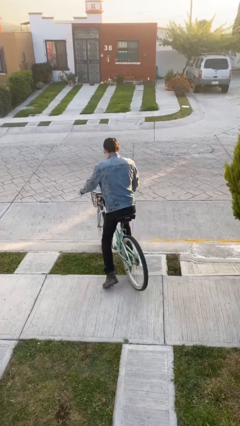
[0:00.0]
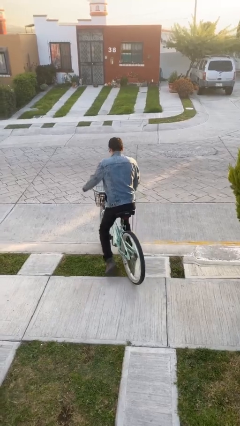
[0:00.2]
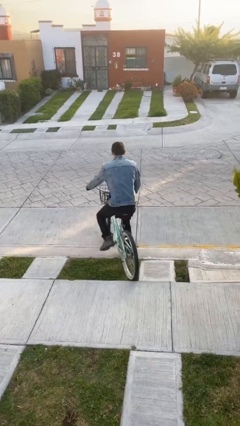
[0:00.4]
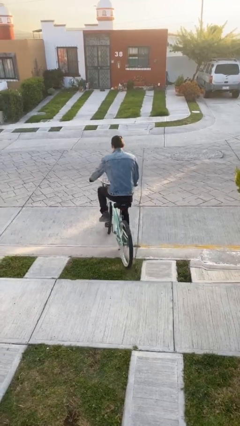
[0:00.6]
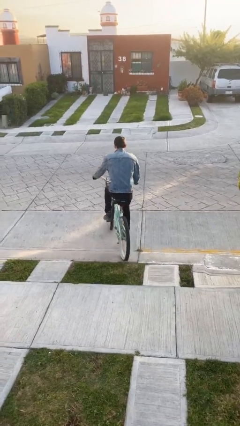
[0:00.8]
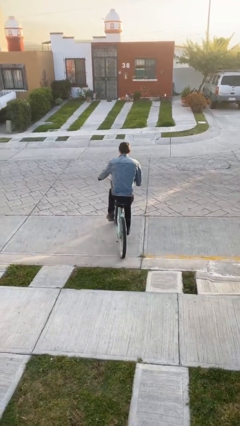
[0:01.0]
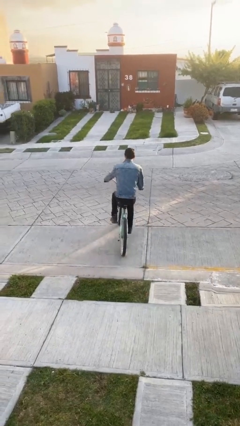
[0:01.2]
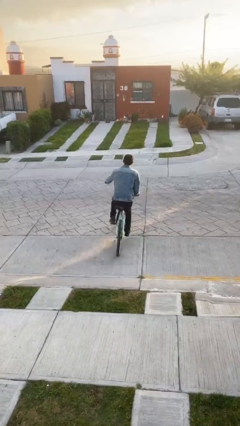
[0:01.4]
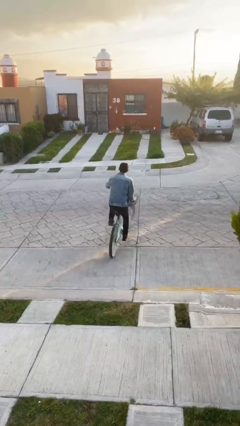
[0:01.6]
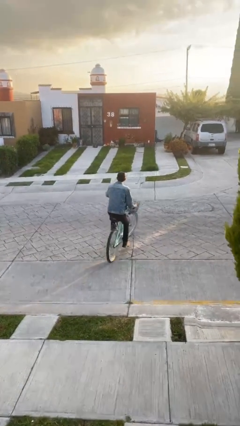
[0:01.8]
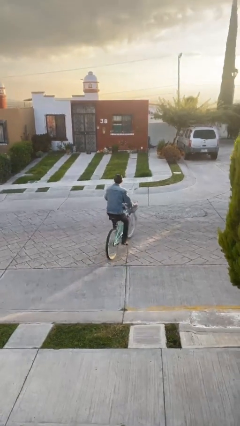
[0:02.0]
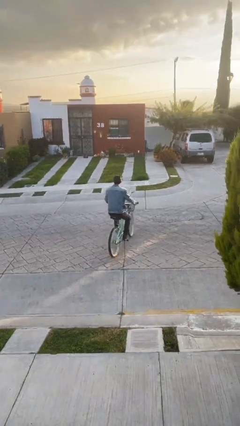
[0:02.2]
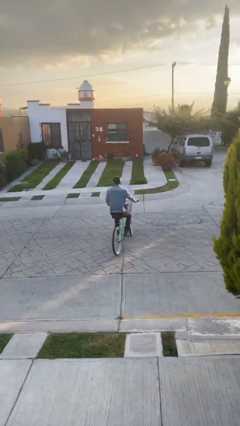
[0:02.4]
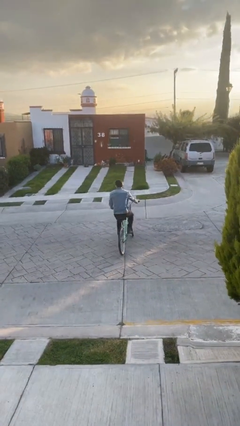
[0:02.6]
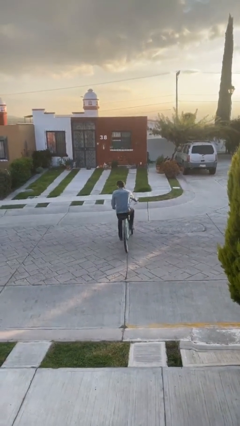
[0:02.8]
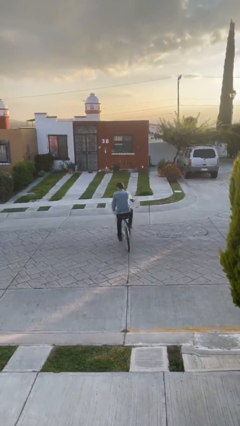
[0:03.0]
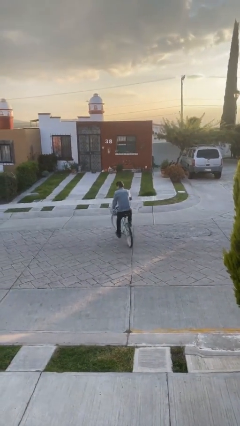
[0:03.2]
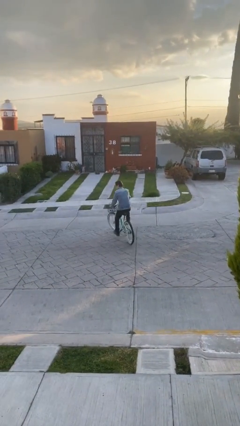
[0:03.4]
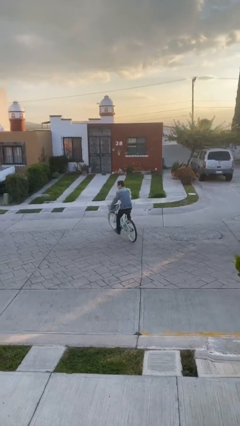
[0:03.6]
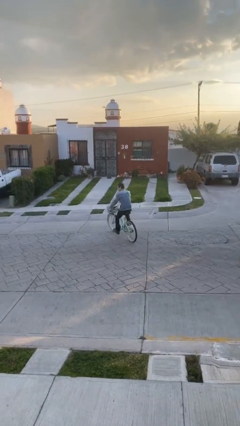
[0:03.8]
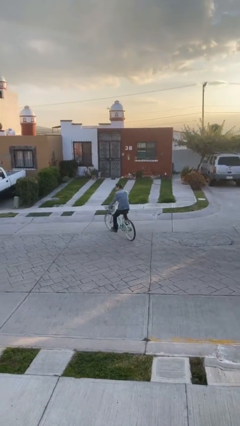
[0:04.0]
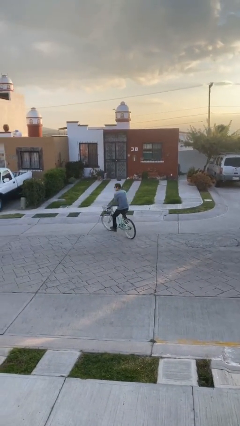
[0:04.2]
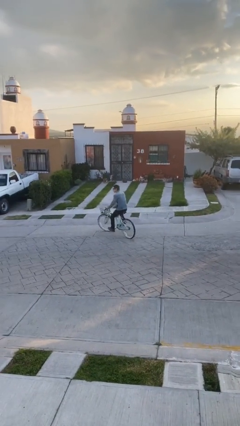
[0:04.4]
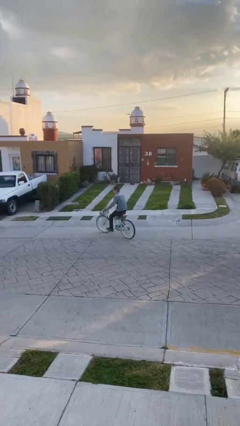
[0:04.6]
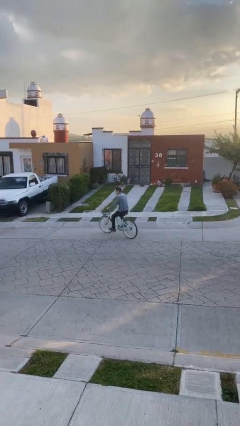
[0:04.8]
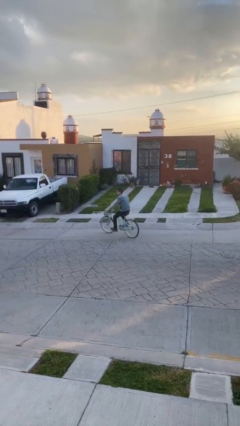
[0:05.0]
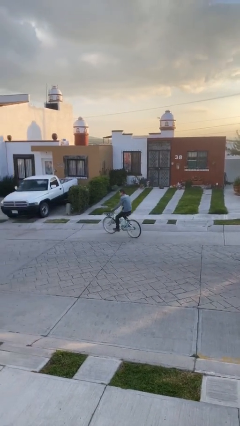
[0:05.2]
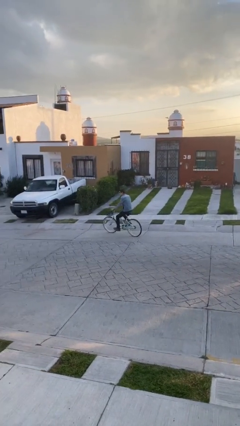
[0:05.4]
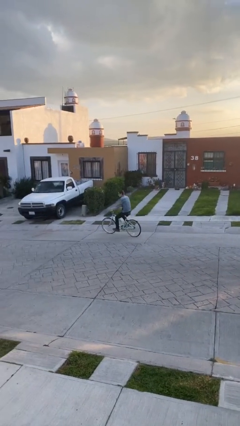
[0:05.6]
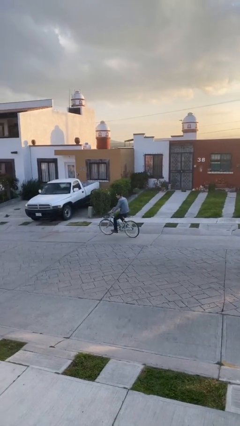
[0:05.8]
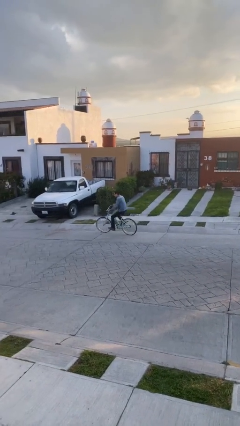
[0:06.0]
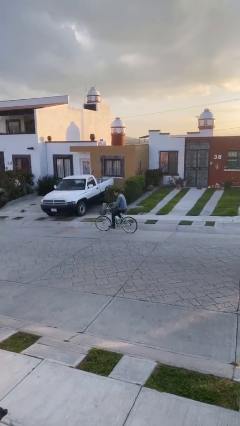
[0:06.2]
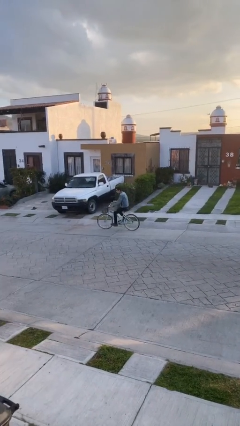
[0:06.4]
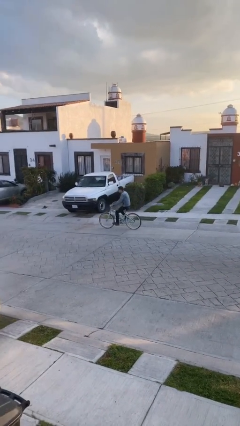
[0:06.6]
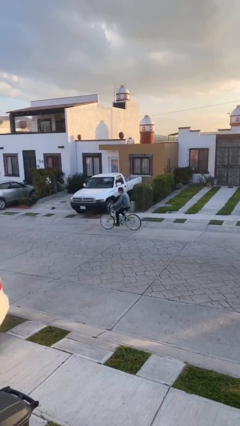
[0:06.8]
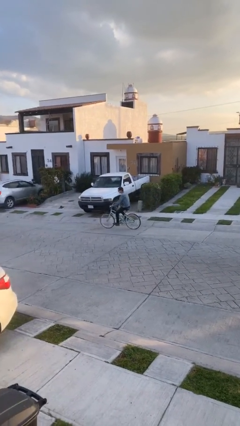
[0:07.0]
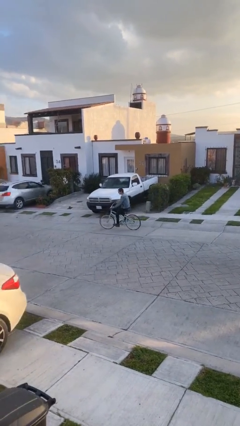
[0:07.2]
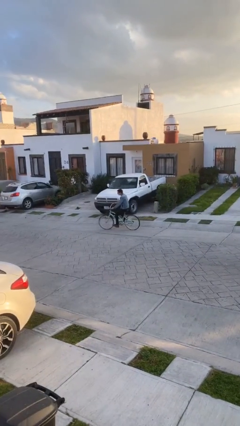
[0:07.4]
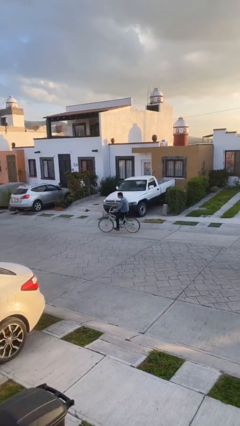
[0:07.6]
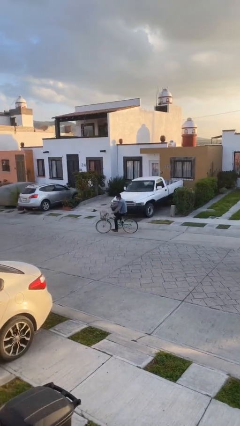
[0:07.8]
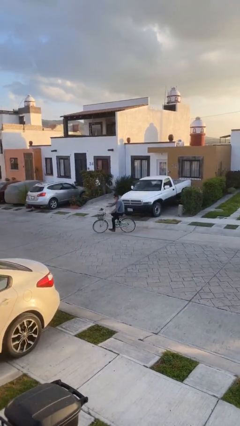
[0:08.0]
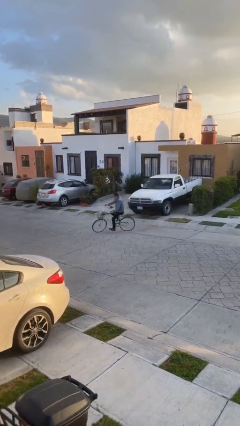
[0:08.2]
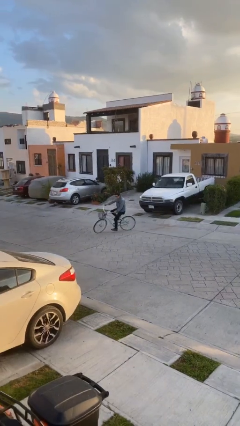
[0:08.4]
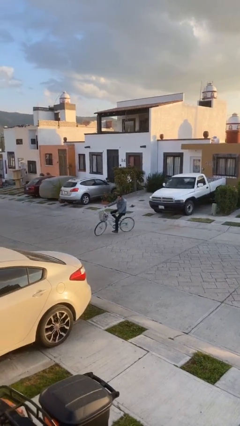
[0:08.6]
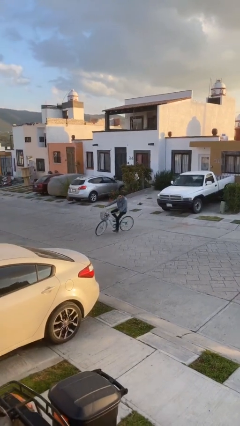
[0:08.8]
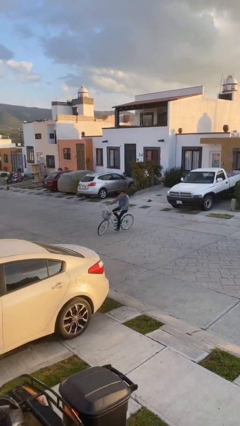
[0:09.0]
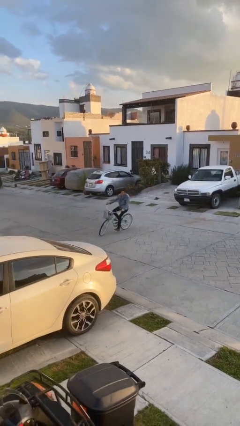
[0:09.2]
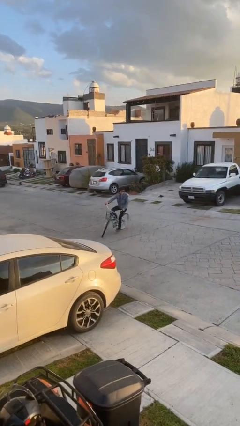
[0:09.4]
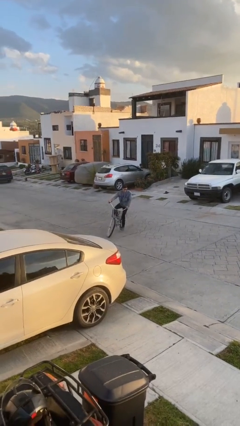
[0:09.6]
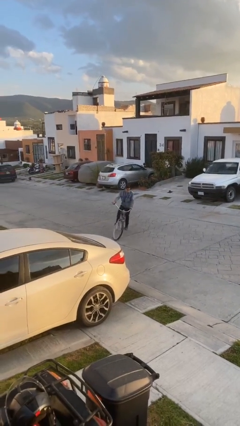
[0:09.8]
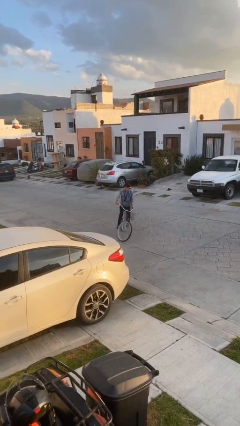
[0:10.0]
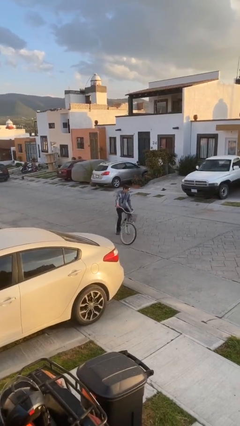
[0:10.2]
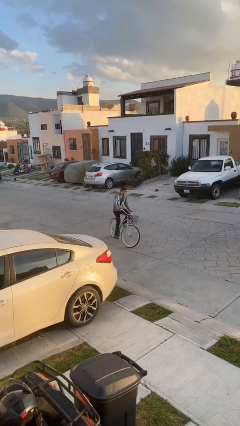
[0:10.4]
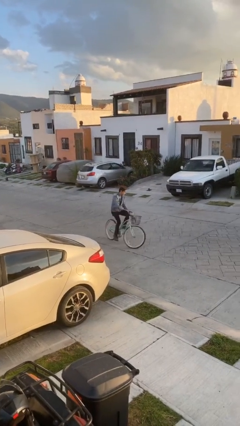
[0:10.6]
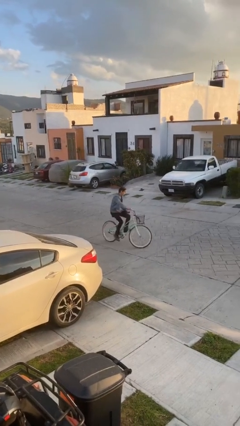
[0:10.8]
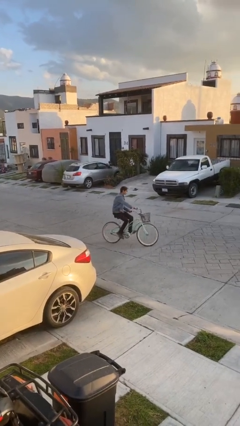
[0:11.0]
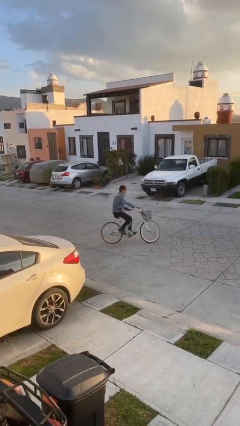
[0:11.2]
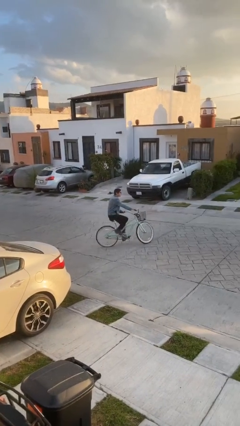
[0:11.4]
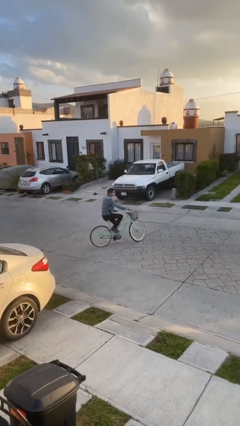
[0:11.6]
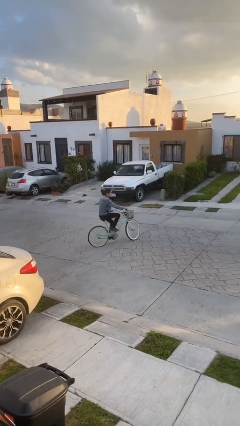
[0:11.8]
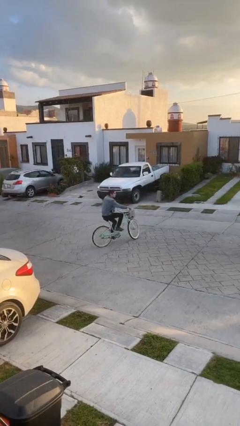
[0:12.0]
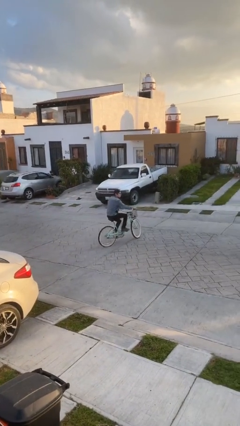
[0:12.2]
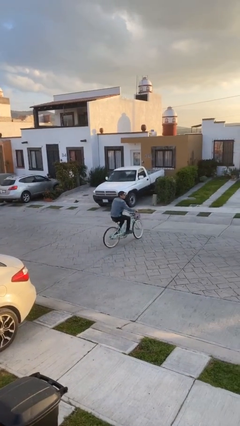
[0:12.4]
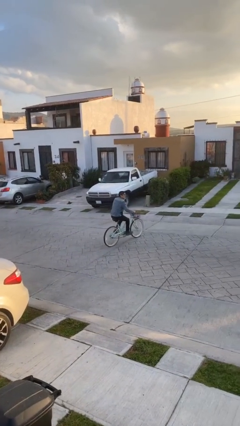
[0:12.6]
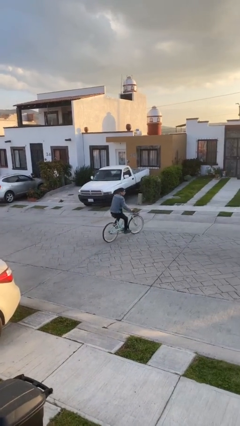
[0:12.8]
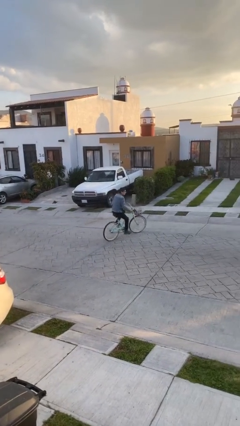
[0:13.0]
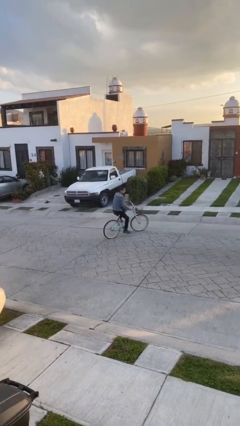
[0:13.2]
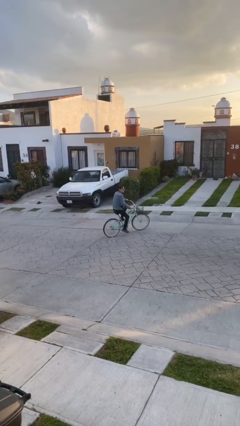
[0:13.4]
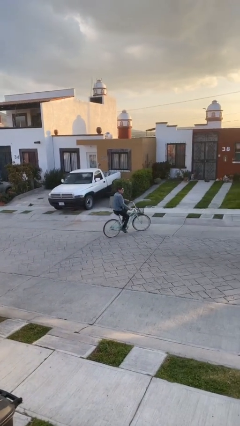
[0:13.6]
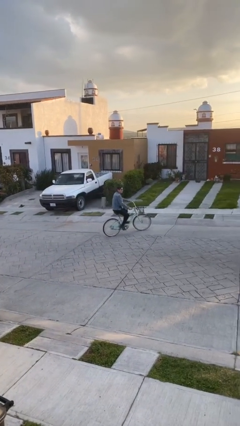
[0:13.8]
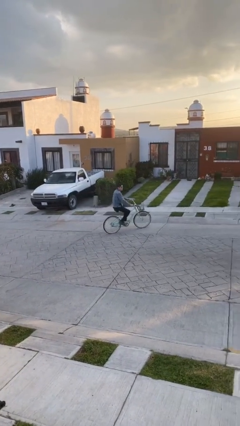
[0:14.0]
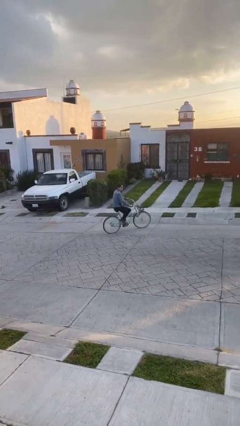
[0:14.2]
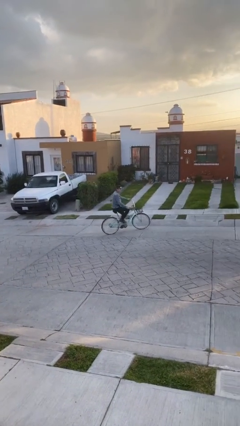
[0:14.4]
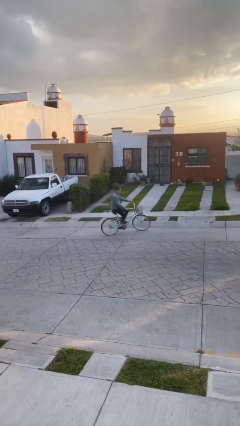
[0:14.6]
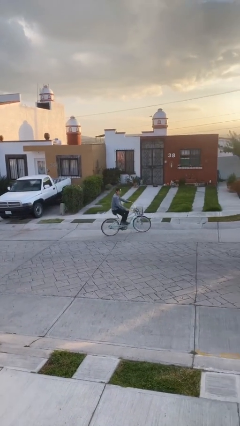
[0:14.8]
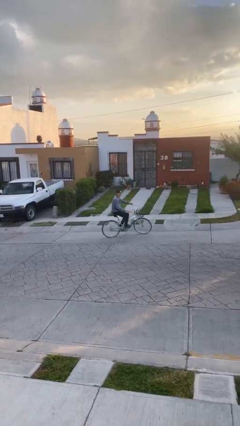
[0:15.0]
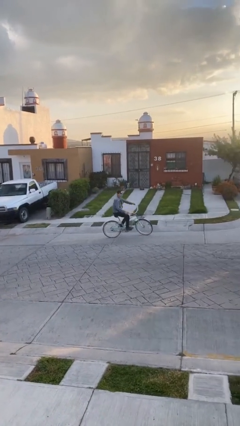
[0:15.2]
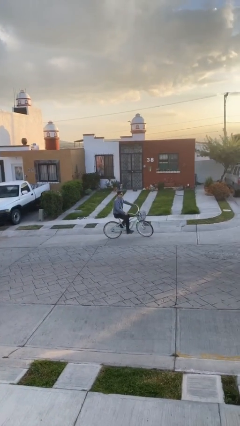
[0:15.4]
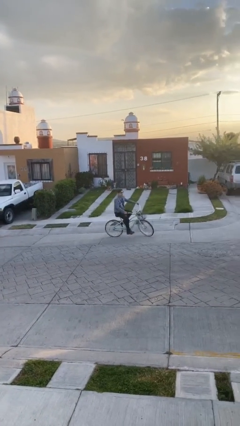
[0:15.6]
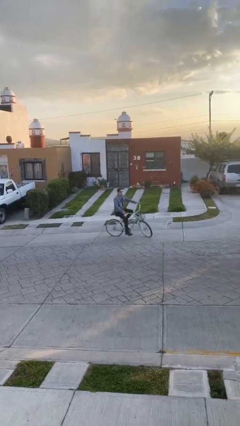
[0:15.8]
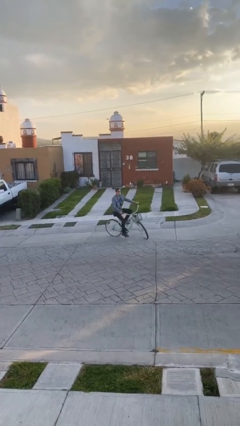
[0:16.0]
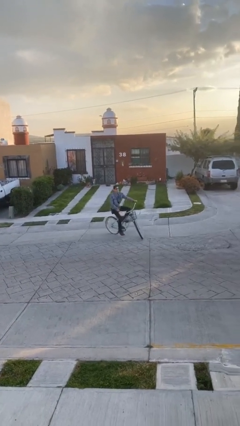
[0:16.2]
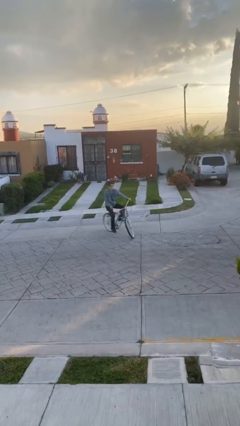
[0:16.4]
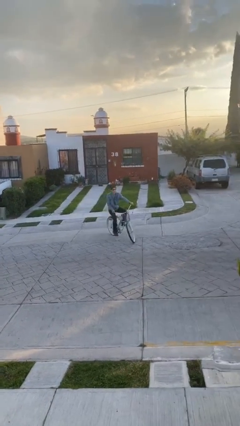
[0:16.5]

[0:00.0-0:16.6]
person rides bicycle

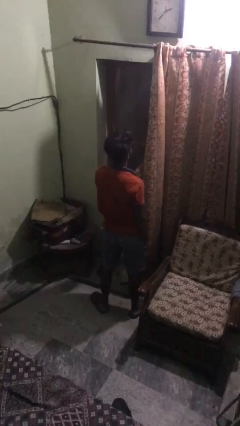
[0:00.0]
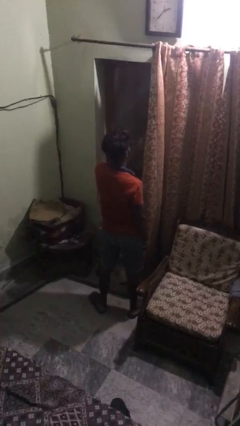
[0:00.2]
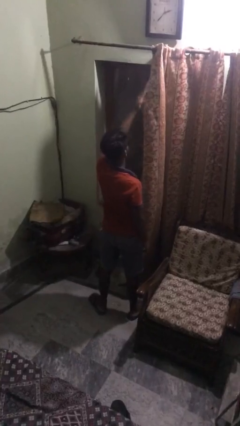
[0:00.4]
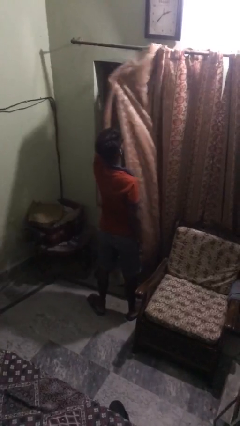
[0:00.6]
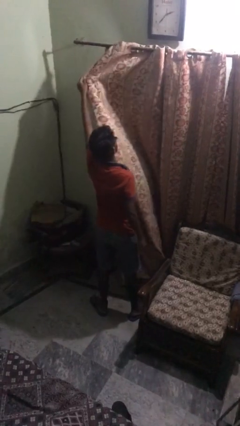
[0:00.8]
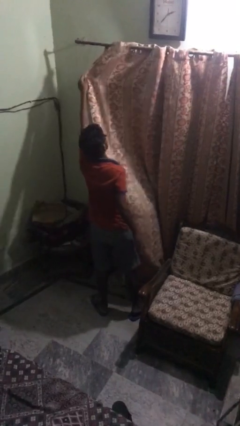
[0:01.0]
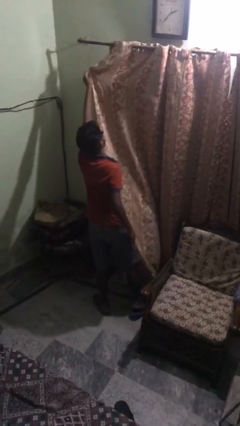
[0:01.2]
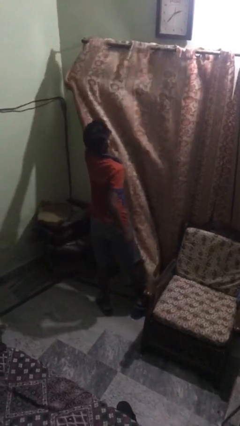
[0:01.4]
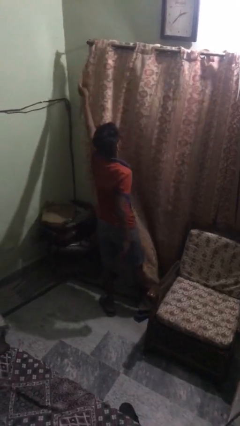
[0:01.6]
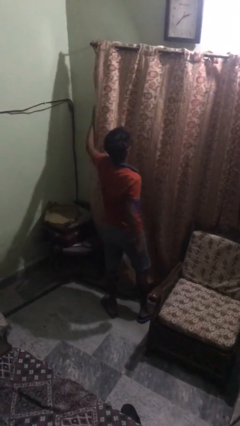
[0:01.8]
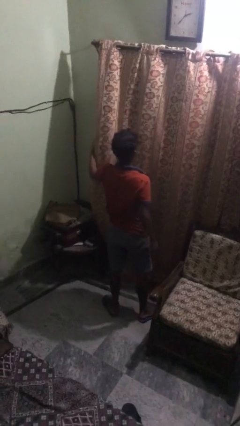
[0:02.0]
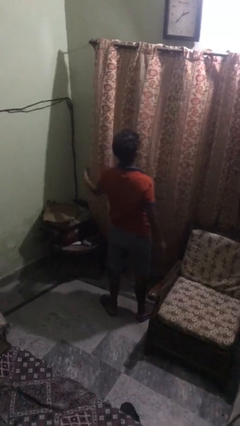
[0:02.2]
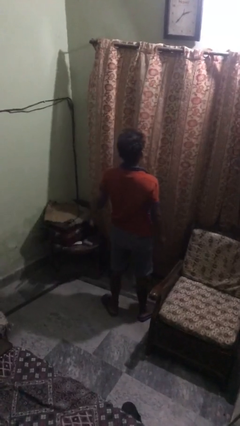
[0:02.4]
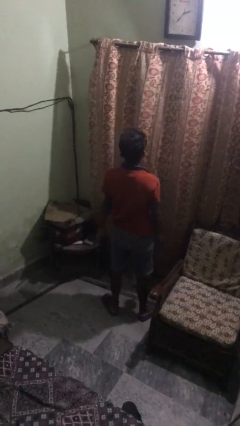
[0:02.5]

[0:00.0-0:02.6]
person closes curtains
